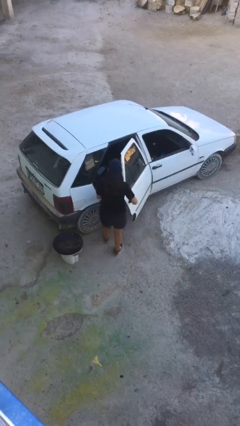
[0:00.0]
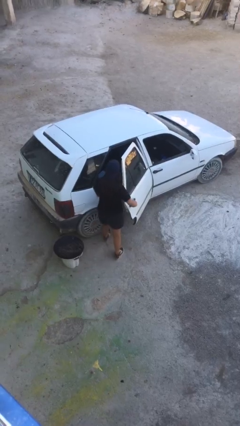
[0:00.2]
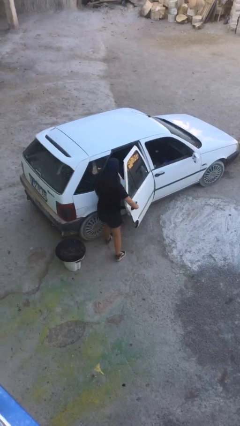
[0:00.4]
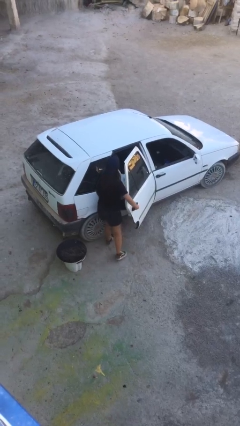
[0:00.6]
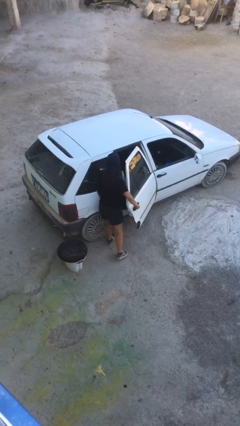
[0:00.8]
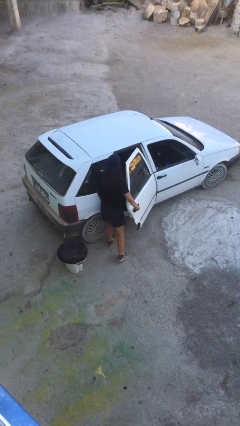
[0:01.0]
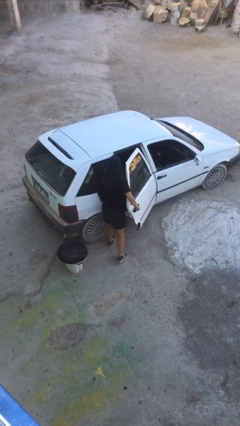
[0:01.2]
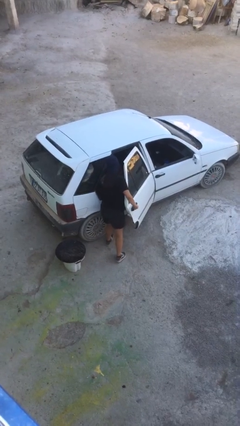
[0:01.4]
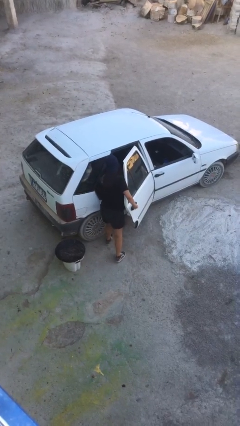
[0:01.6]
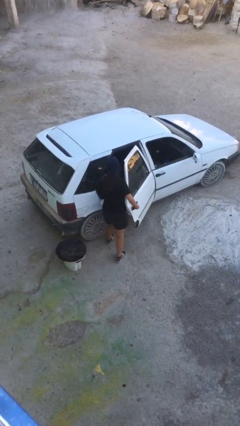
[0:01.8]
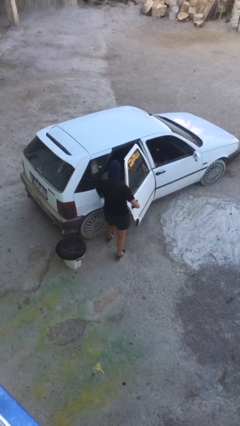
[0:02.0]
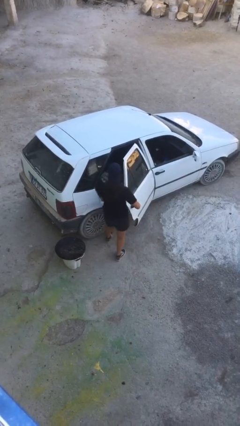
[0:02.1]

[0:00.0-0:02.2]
person loads car

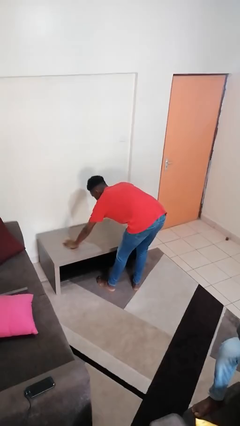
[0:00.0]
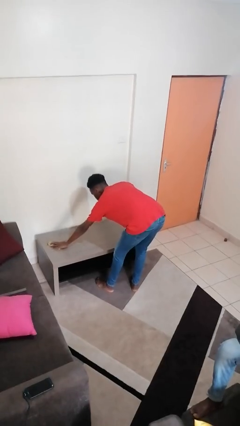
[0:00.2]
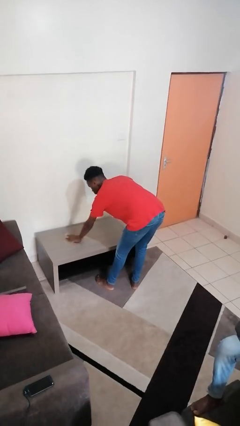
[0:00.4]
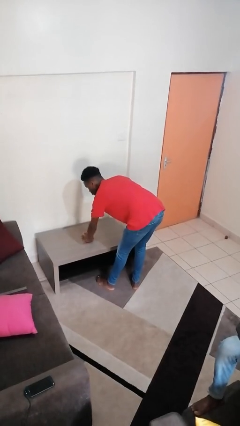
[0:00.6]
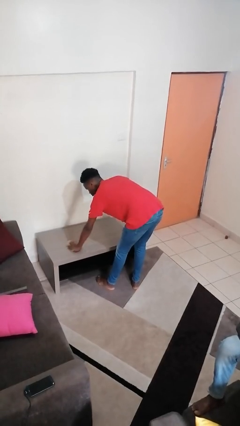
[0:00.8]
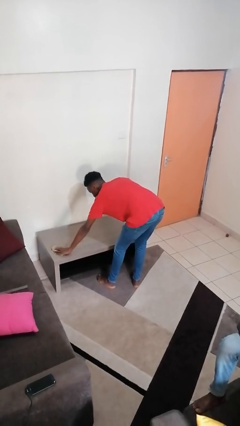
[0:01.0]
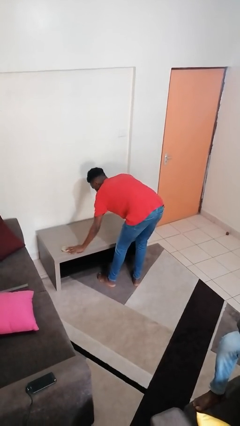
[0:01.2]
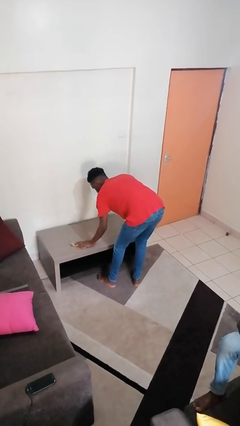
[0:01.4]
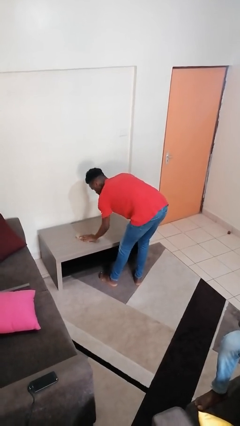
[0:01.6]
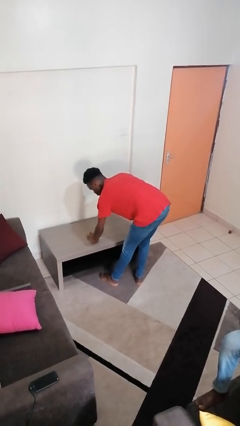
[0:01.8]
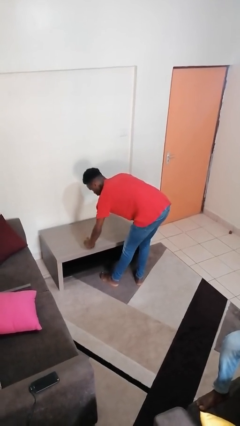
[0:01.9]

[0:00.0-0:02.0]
person cleans table with rag

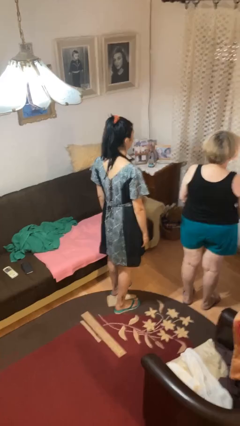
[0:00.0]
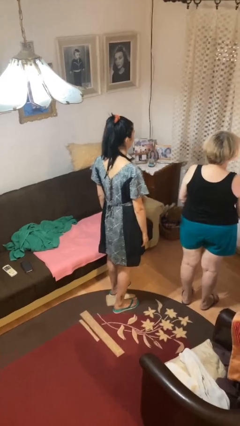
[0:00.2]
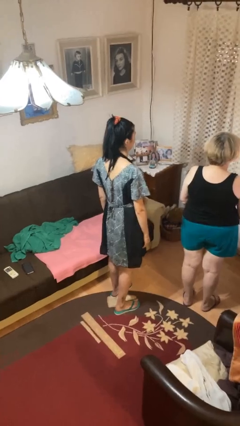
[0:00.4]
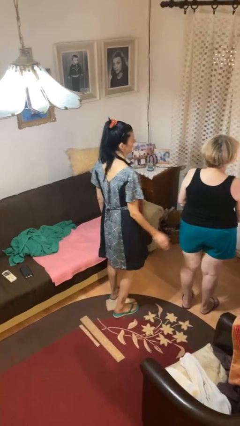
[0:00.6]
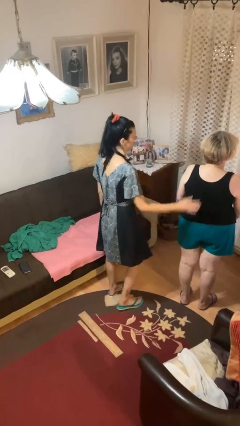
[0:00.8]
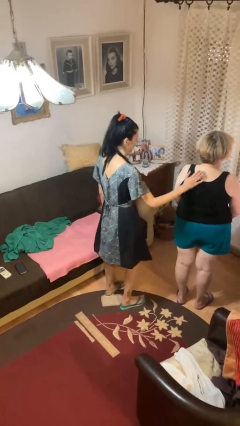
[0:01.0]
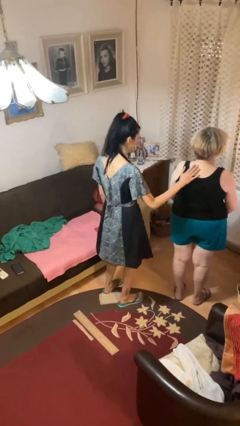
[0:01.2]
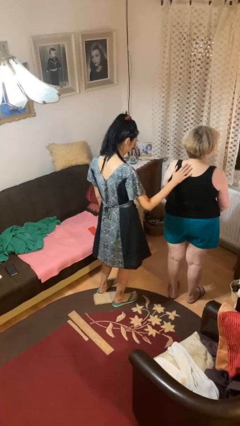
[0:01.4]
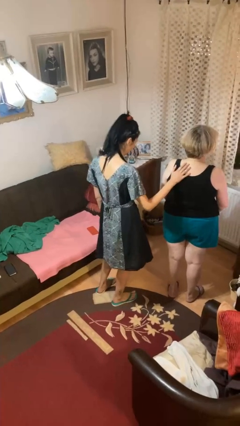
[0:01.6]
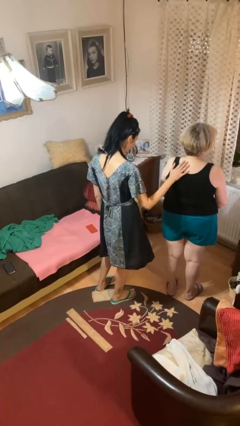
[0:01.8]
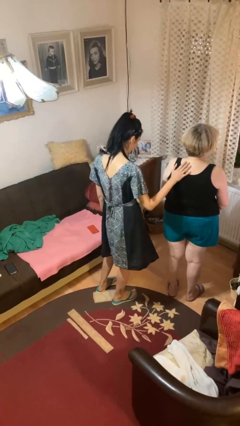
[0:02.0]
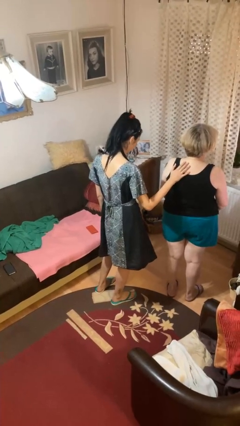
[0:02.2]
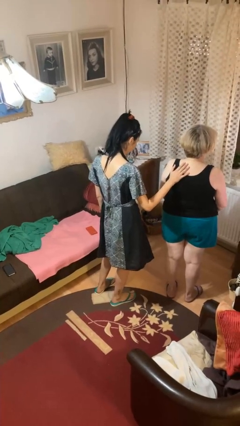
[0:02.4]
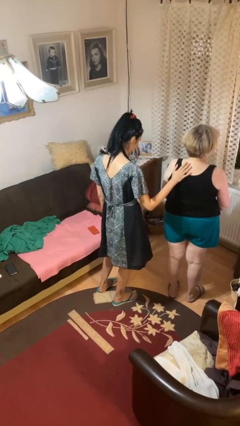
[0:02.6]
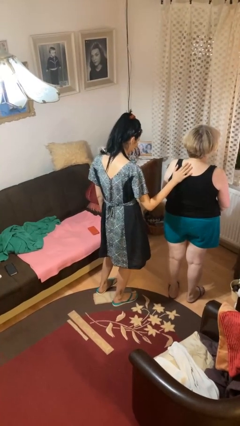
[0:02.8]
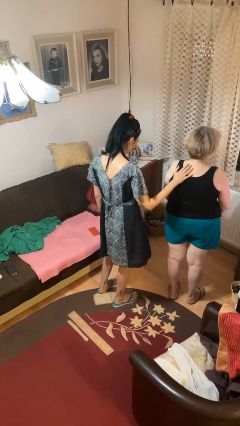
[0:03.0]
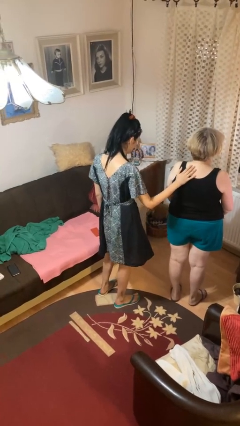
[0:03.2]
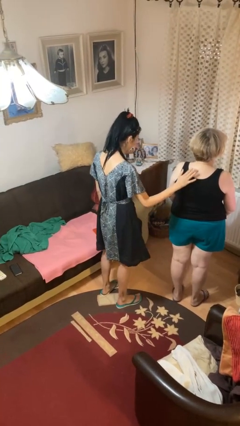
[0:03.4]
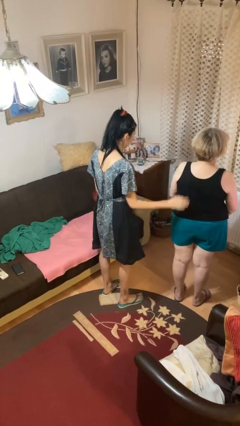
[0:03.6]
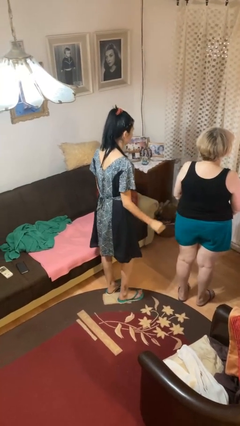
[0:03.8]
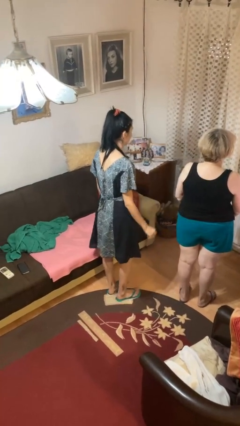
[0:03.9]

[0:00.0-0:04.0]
person touches back of person

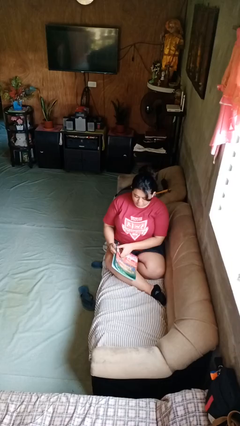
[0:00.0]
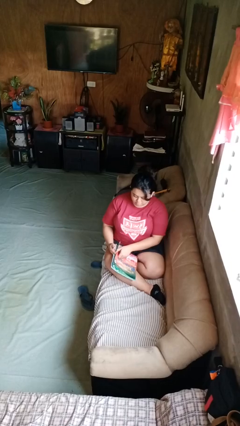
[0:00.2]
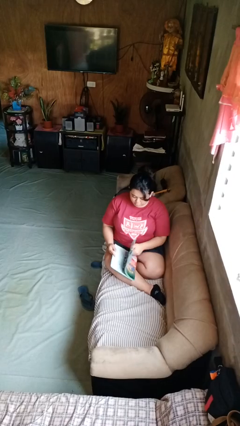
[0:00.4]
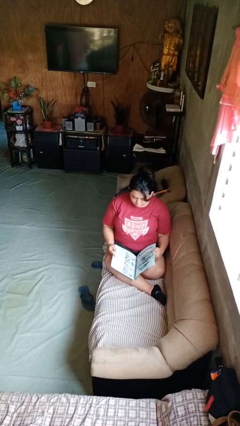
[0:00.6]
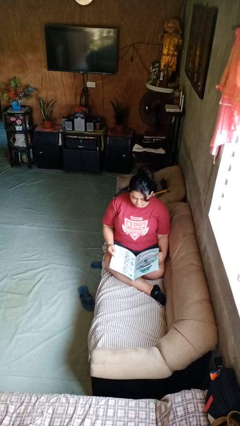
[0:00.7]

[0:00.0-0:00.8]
person reads magazine

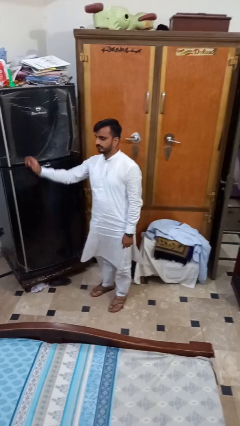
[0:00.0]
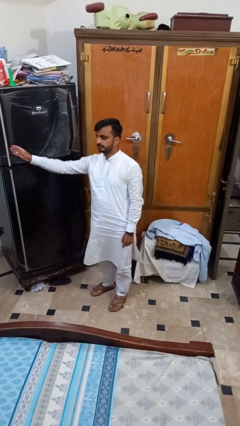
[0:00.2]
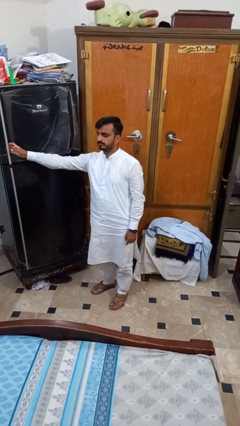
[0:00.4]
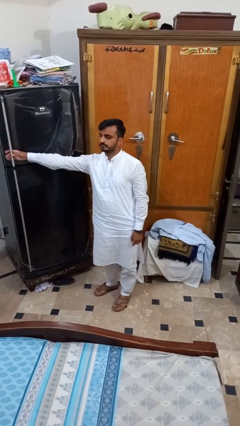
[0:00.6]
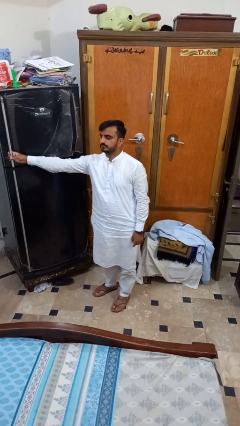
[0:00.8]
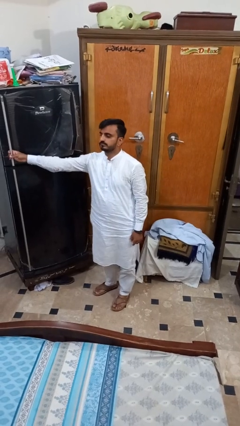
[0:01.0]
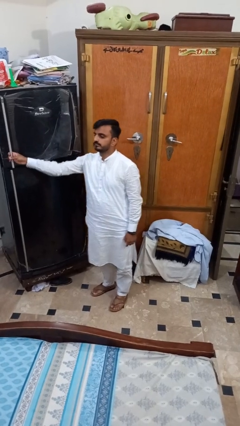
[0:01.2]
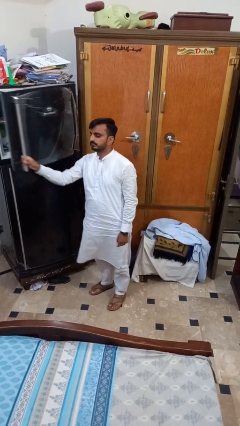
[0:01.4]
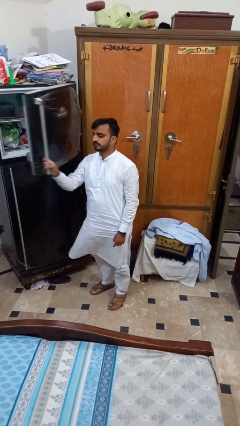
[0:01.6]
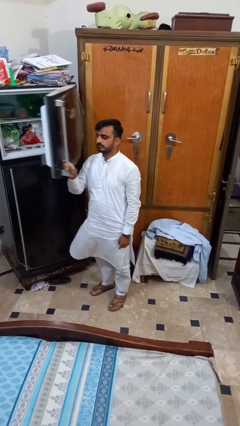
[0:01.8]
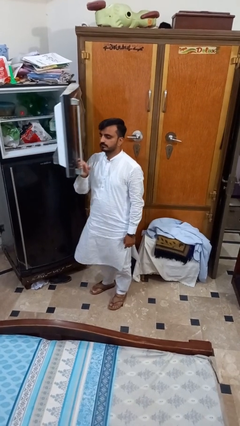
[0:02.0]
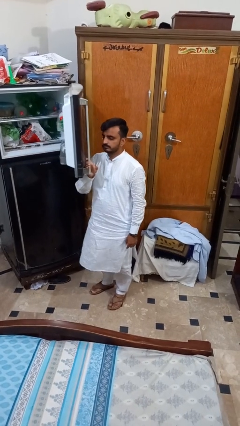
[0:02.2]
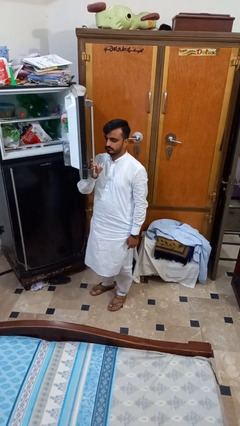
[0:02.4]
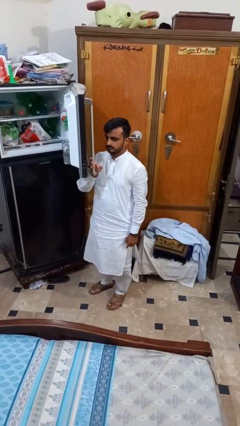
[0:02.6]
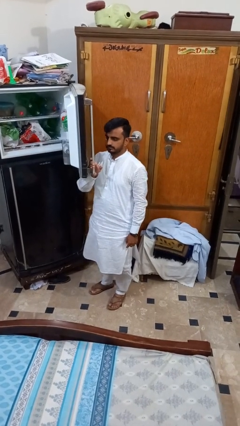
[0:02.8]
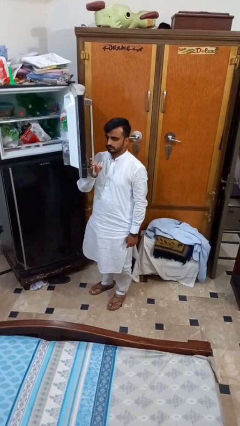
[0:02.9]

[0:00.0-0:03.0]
person opens refrigerator

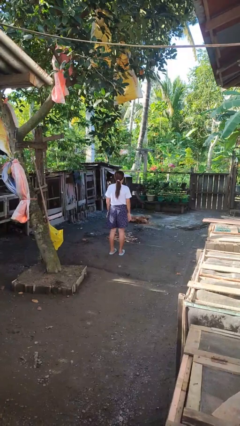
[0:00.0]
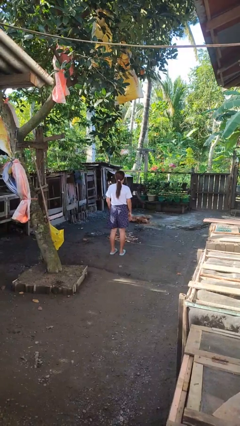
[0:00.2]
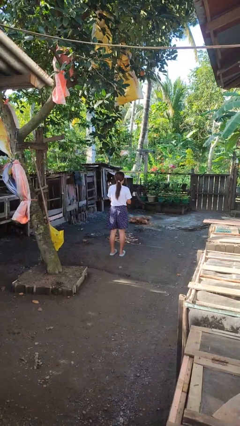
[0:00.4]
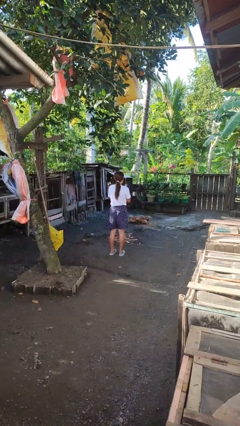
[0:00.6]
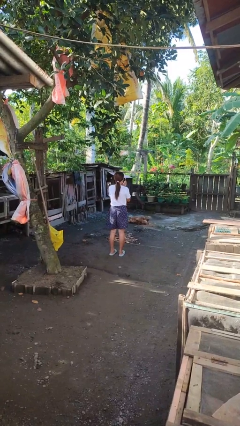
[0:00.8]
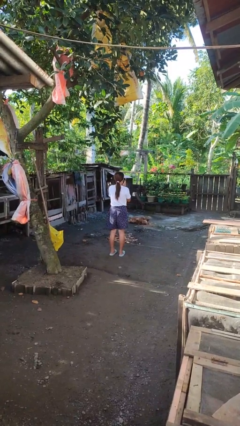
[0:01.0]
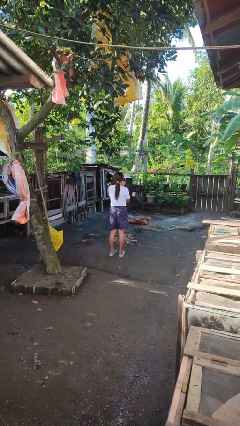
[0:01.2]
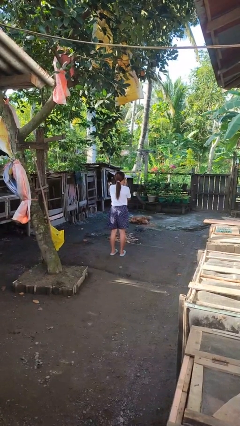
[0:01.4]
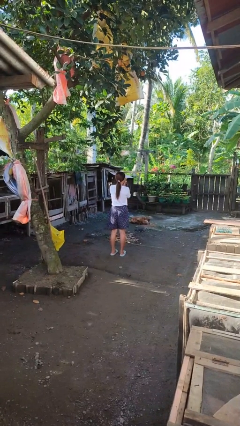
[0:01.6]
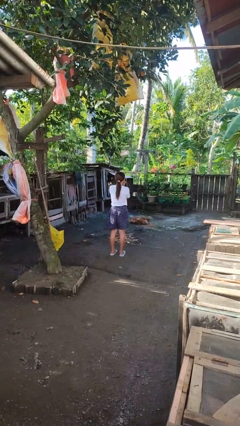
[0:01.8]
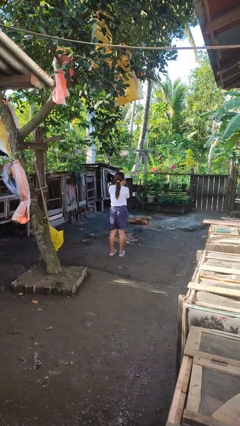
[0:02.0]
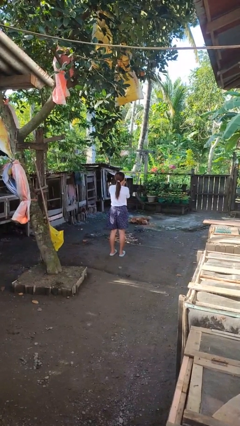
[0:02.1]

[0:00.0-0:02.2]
person blows into hands

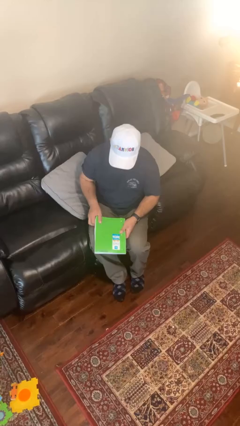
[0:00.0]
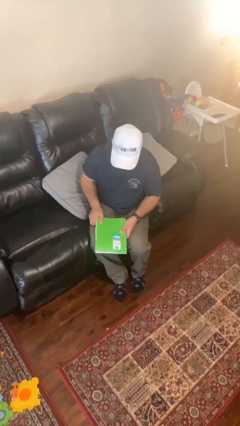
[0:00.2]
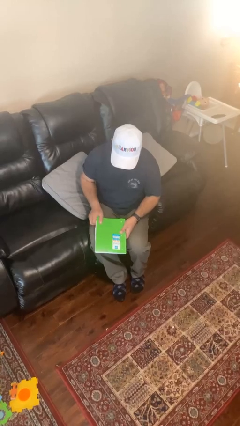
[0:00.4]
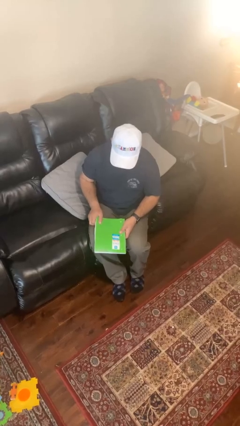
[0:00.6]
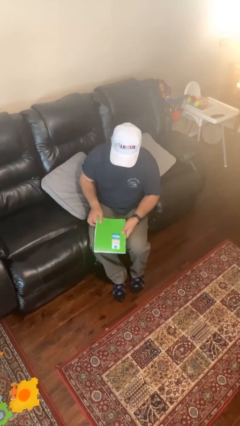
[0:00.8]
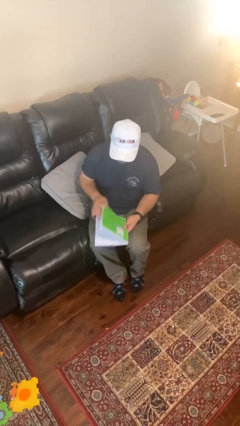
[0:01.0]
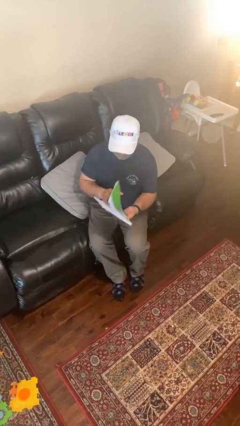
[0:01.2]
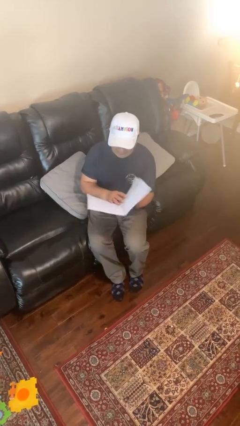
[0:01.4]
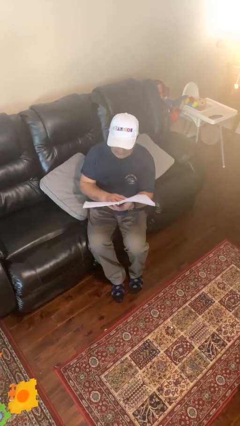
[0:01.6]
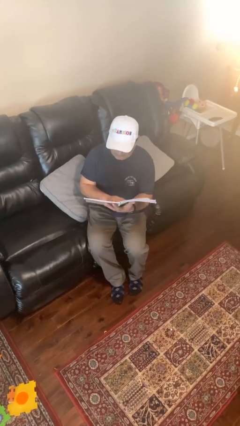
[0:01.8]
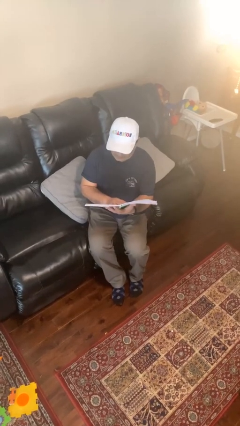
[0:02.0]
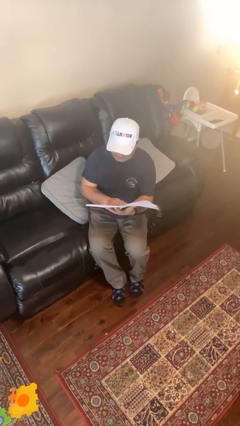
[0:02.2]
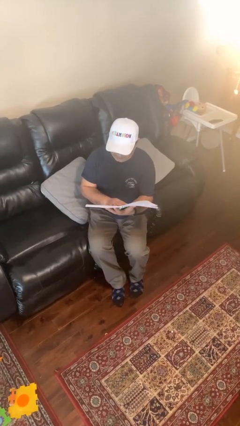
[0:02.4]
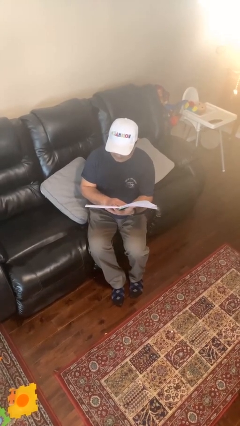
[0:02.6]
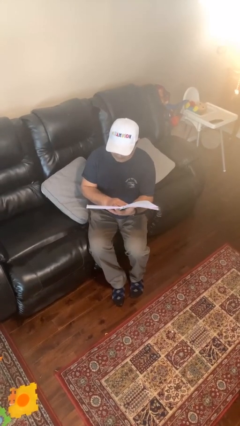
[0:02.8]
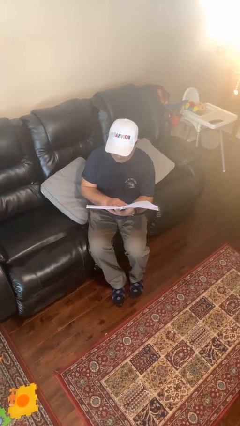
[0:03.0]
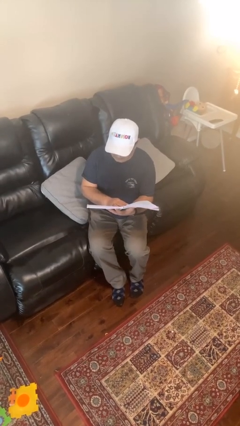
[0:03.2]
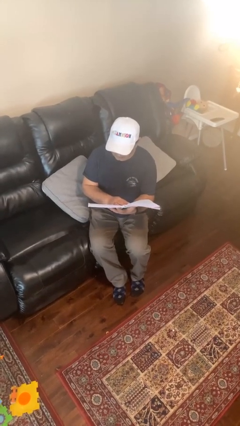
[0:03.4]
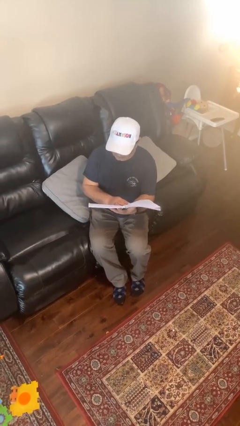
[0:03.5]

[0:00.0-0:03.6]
person reads document
